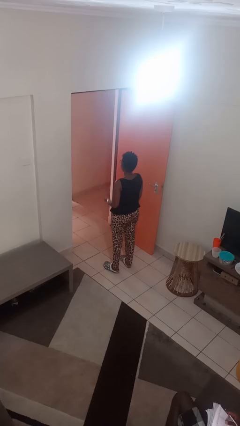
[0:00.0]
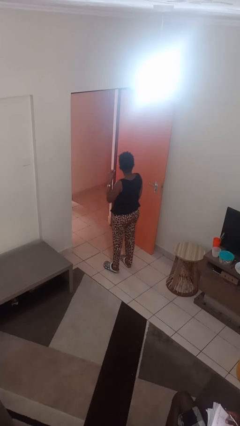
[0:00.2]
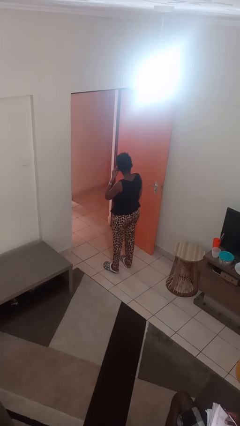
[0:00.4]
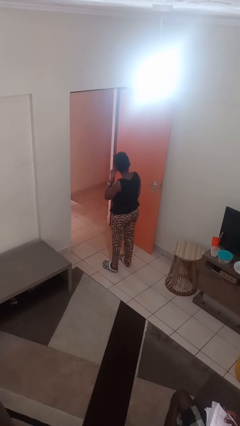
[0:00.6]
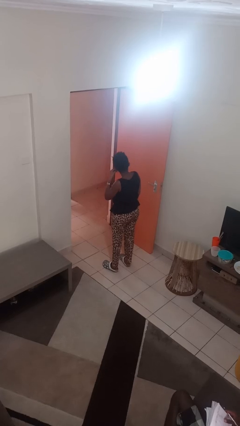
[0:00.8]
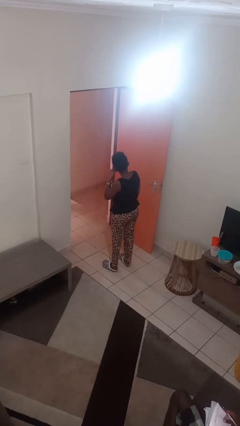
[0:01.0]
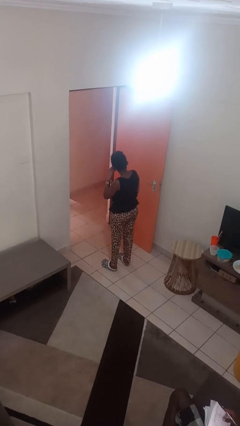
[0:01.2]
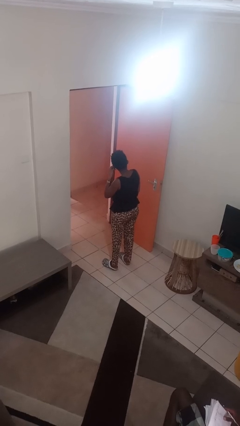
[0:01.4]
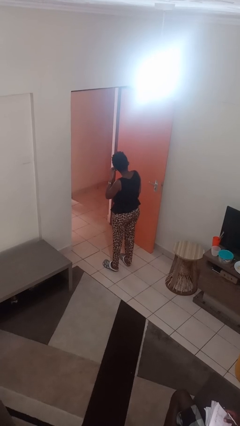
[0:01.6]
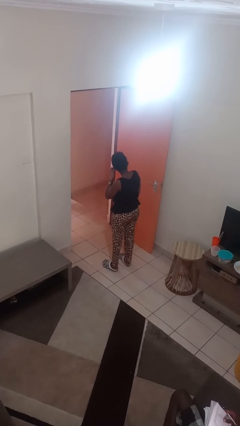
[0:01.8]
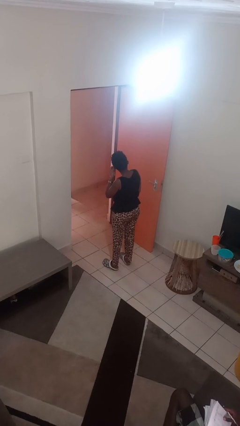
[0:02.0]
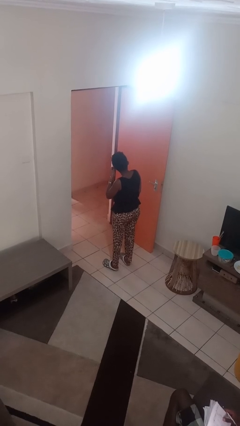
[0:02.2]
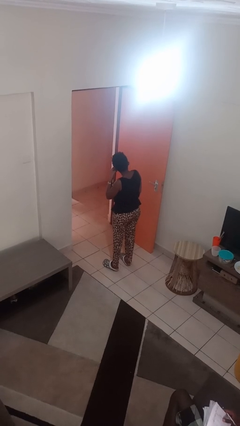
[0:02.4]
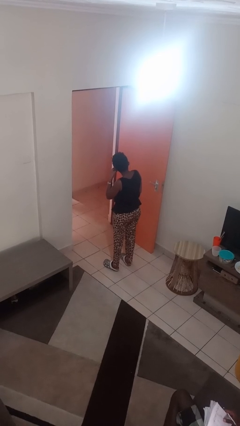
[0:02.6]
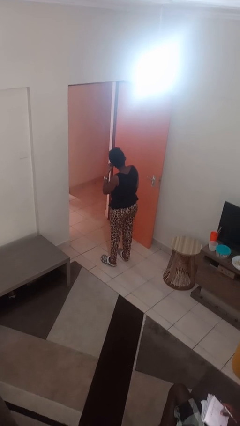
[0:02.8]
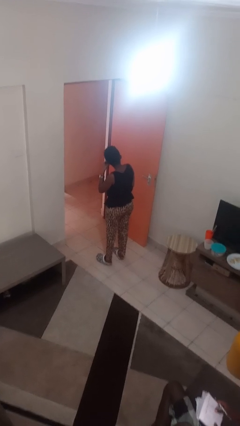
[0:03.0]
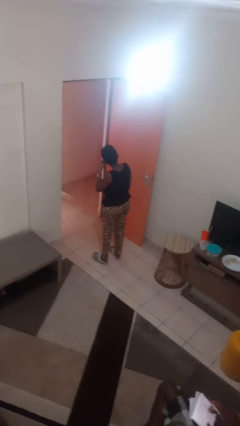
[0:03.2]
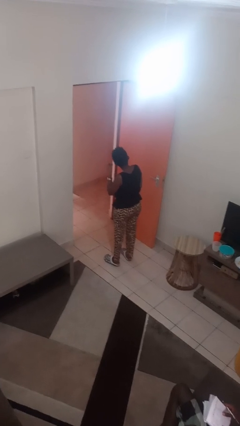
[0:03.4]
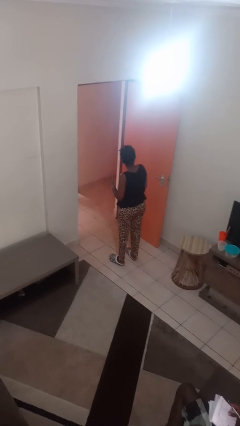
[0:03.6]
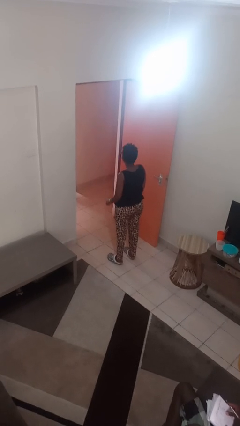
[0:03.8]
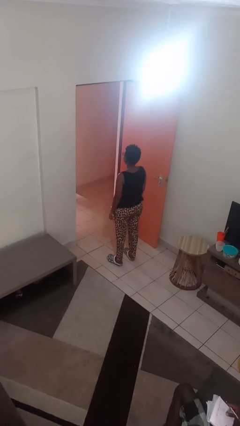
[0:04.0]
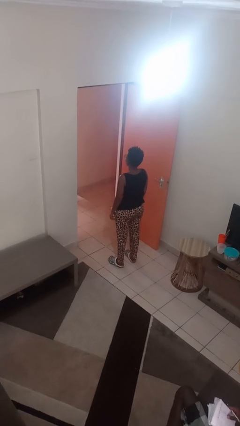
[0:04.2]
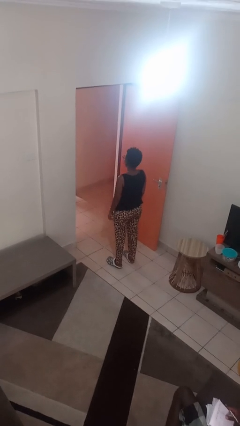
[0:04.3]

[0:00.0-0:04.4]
person takes off earrings

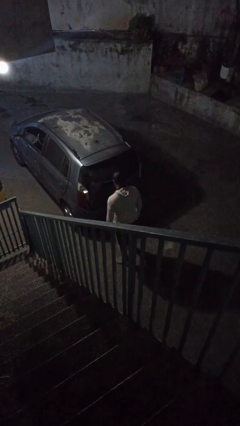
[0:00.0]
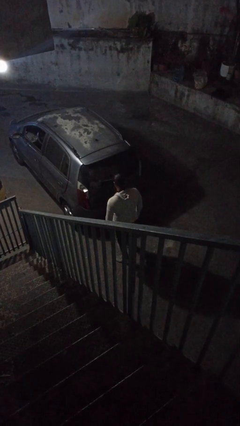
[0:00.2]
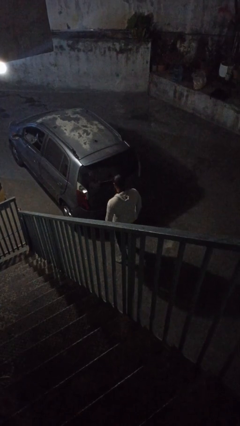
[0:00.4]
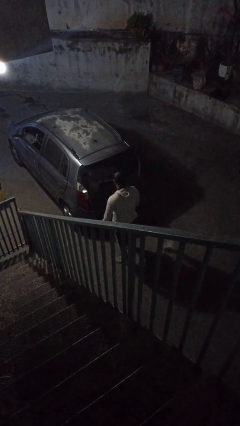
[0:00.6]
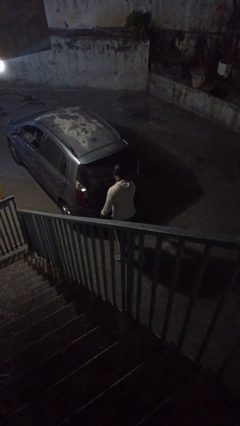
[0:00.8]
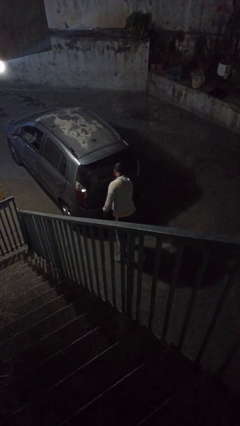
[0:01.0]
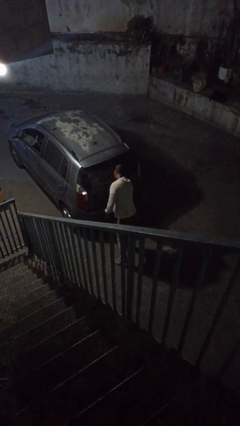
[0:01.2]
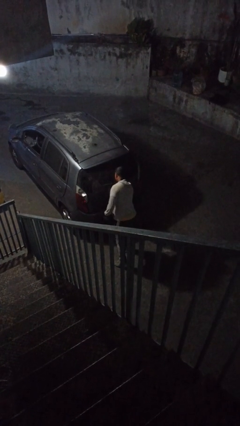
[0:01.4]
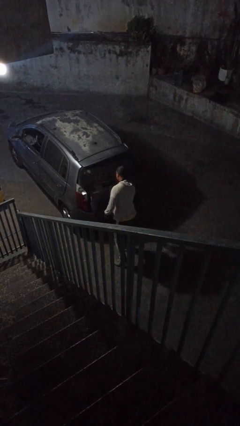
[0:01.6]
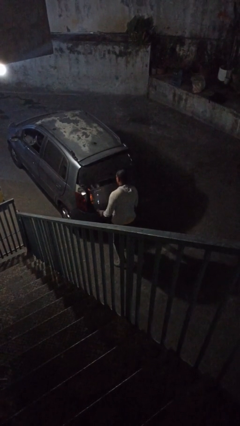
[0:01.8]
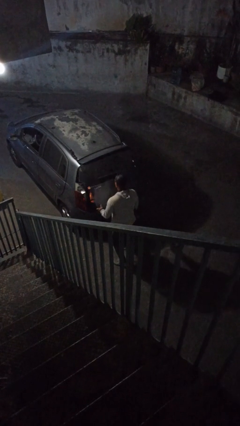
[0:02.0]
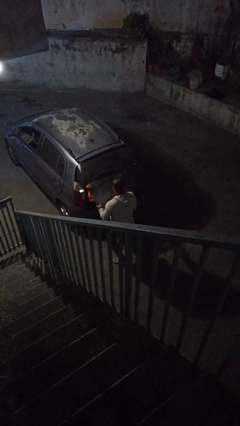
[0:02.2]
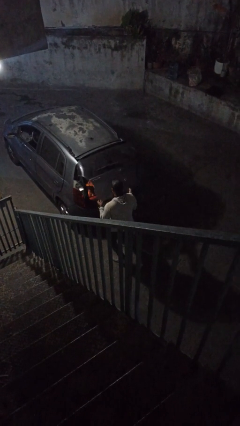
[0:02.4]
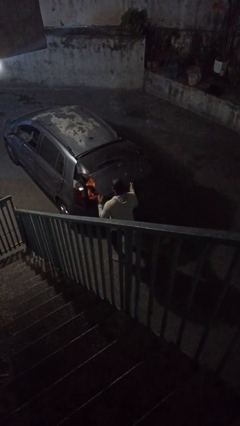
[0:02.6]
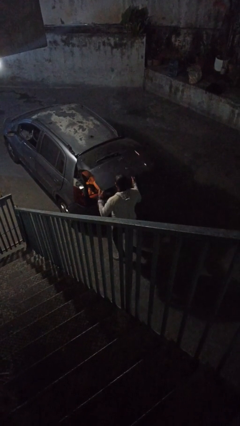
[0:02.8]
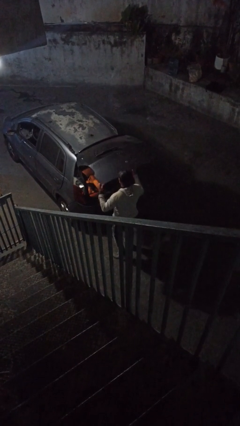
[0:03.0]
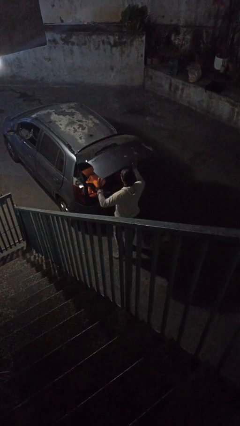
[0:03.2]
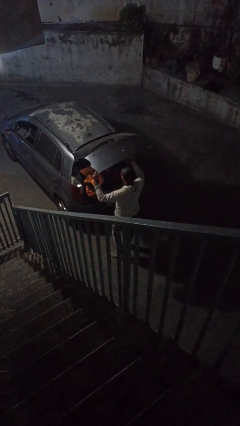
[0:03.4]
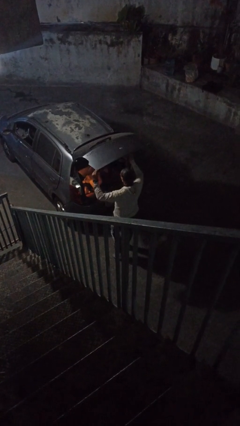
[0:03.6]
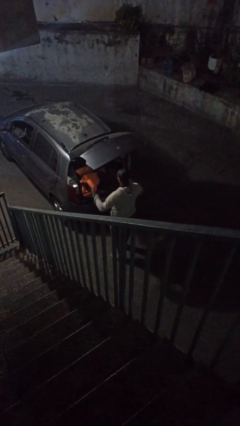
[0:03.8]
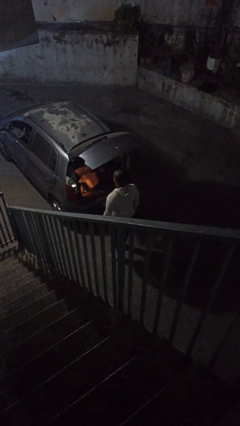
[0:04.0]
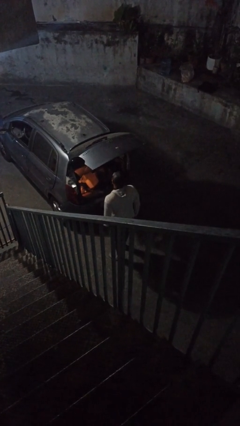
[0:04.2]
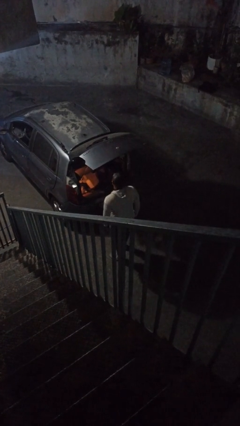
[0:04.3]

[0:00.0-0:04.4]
person opens car trunk

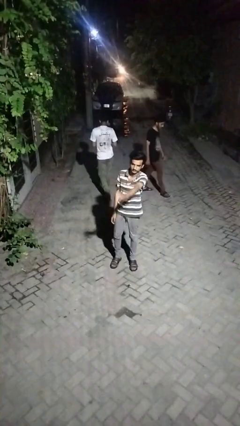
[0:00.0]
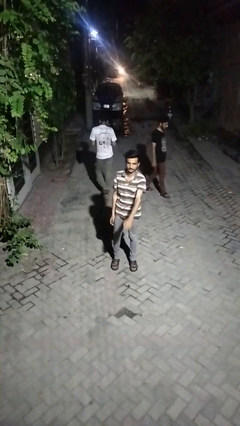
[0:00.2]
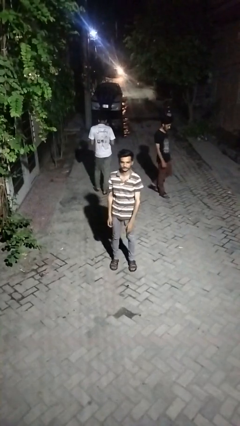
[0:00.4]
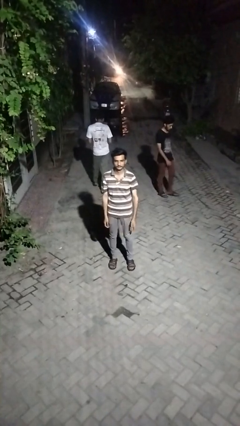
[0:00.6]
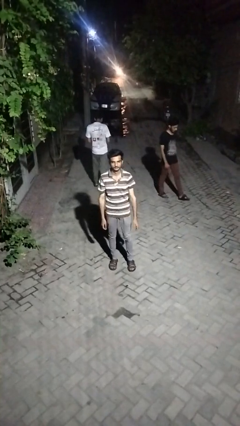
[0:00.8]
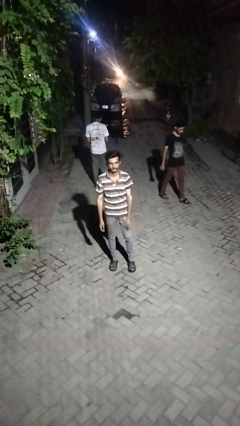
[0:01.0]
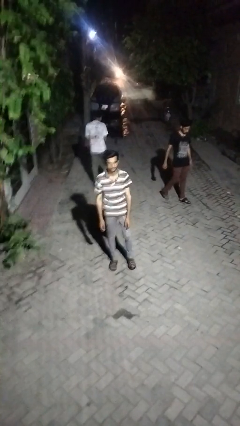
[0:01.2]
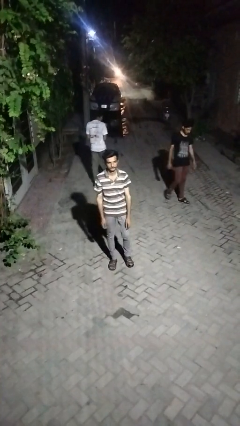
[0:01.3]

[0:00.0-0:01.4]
person waves at person

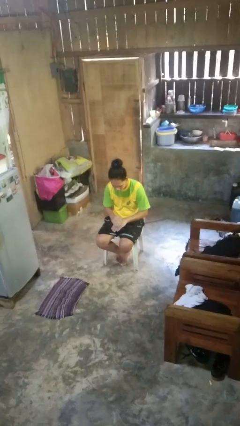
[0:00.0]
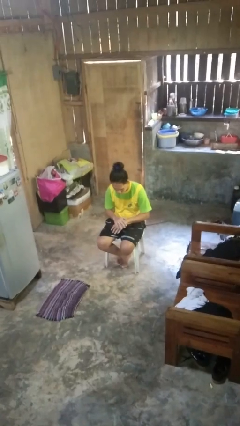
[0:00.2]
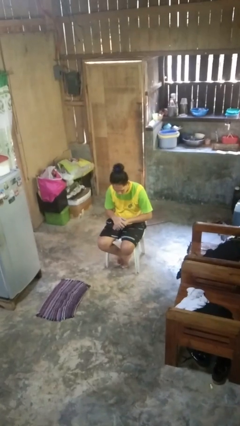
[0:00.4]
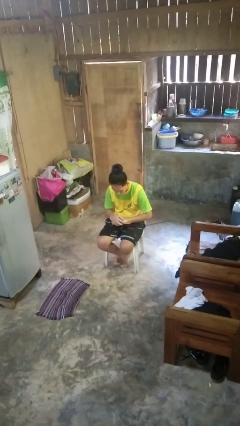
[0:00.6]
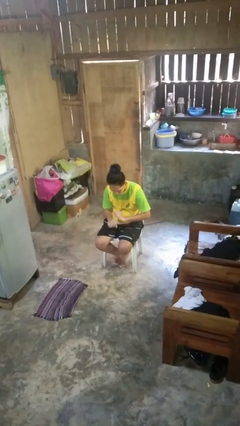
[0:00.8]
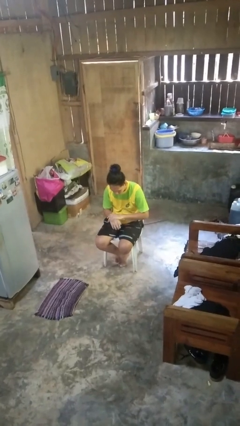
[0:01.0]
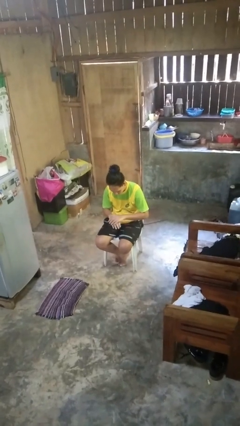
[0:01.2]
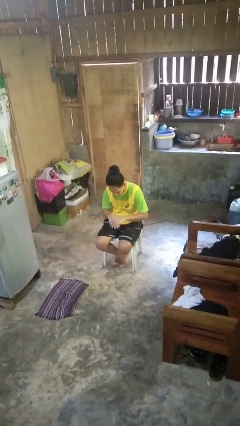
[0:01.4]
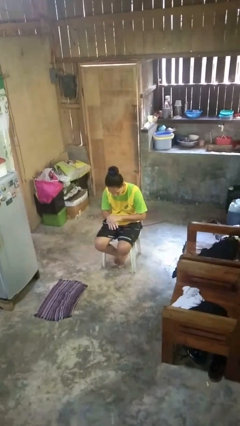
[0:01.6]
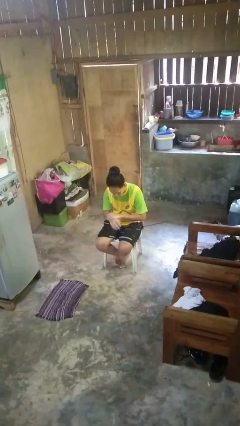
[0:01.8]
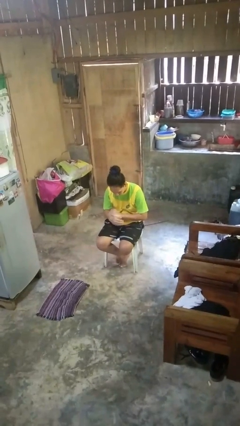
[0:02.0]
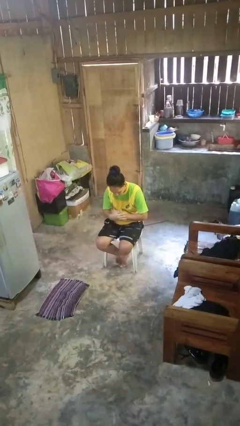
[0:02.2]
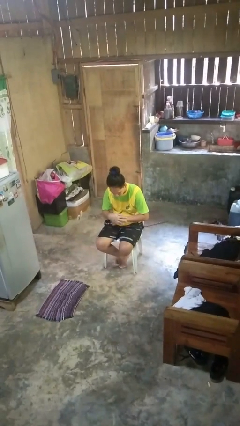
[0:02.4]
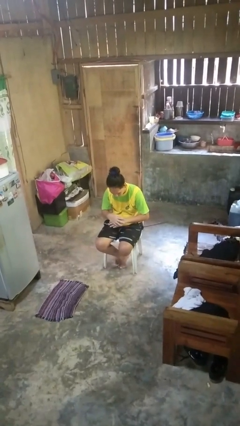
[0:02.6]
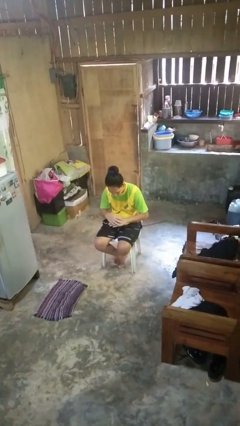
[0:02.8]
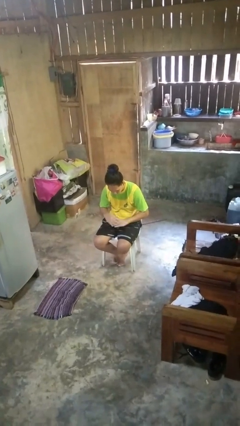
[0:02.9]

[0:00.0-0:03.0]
person looks at hands in lap

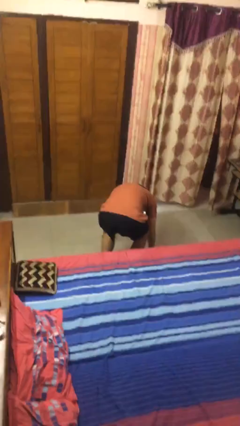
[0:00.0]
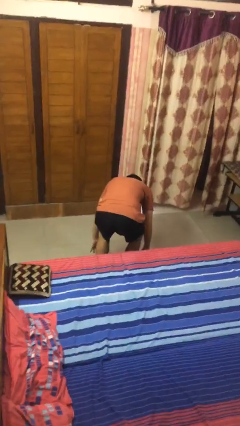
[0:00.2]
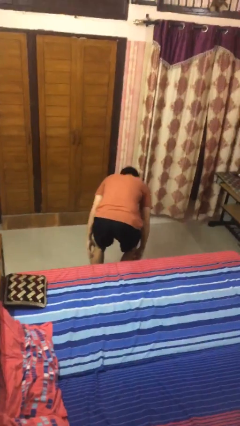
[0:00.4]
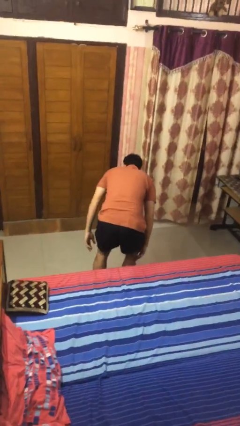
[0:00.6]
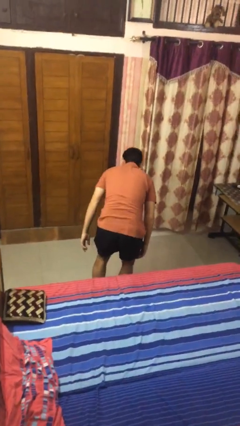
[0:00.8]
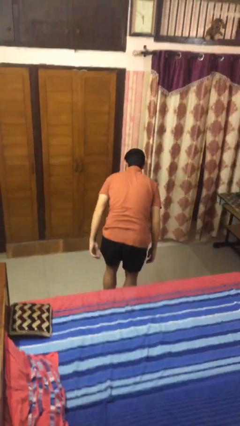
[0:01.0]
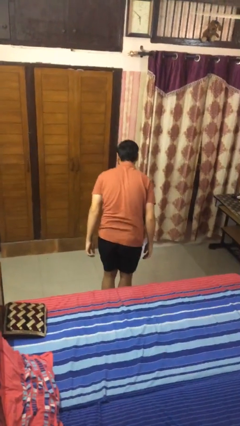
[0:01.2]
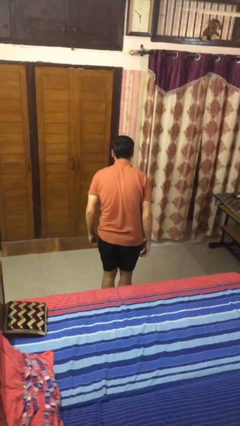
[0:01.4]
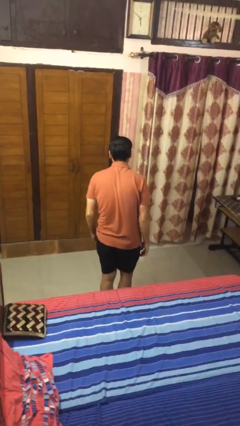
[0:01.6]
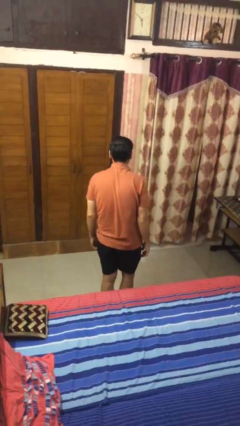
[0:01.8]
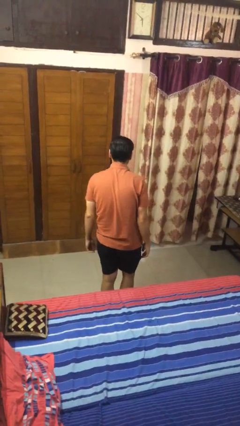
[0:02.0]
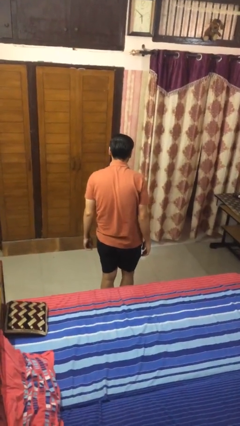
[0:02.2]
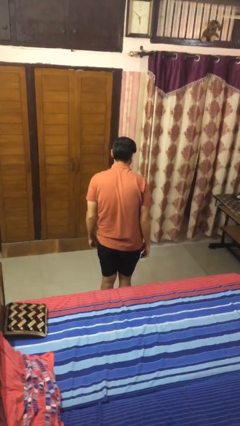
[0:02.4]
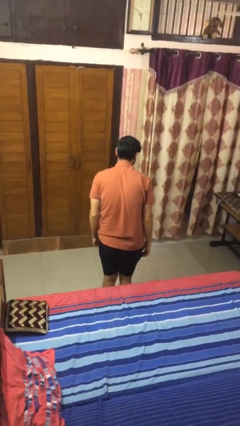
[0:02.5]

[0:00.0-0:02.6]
person stands up from floor

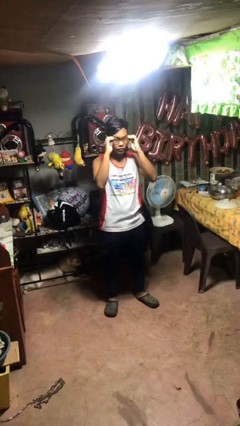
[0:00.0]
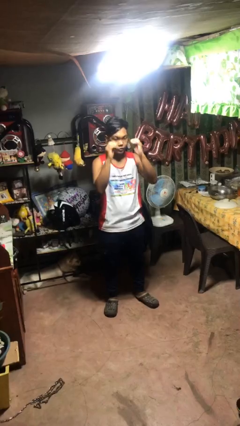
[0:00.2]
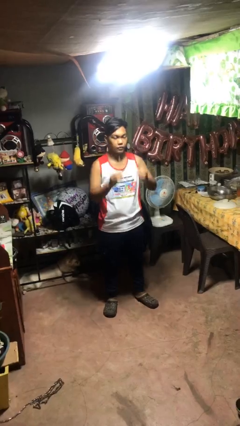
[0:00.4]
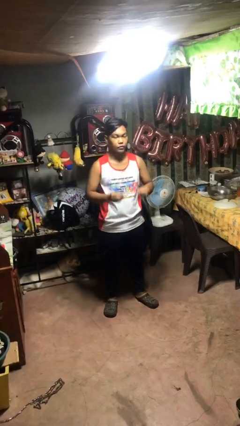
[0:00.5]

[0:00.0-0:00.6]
person takes off glasses

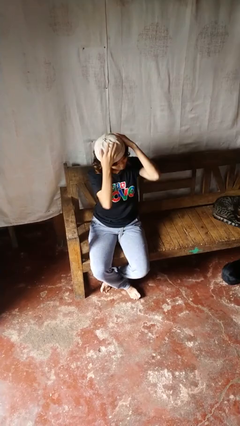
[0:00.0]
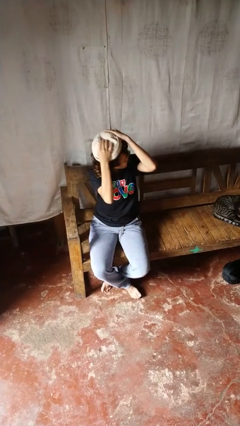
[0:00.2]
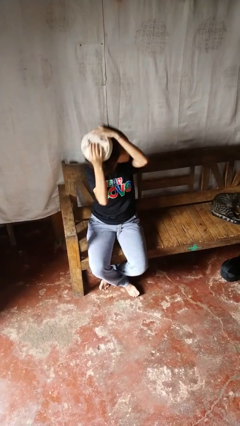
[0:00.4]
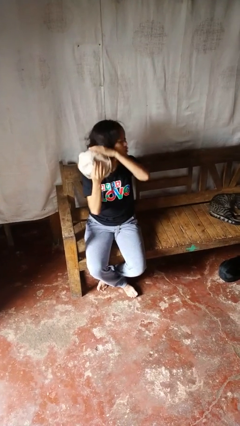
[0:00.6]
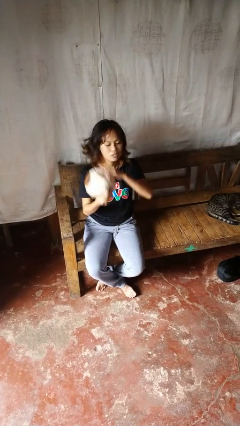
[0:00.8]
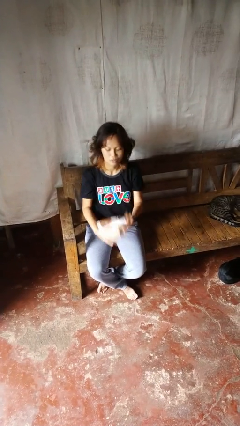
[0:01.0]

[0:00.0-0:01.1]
person takes off hat
